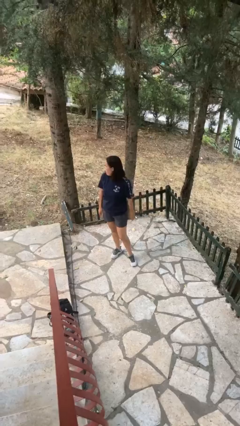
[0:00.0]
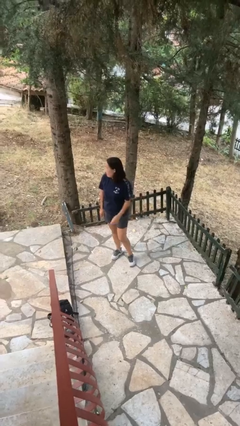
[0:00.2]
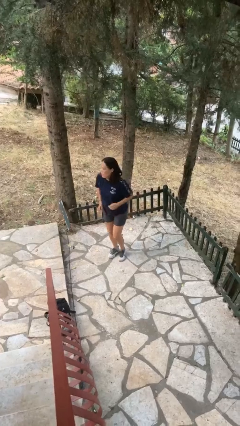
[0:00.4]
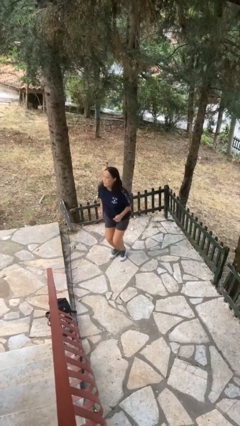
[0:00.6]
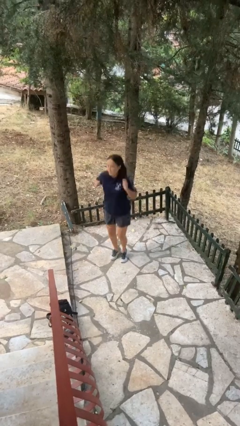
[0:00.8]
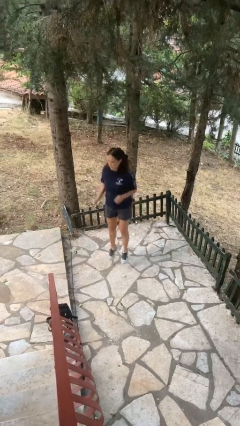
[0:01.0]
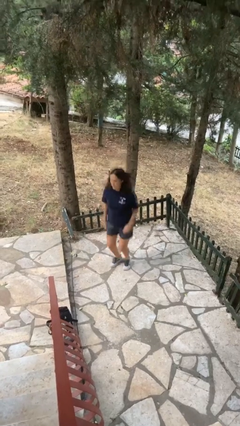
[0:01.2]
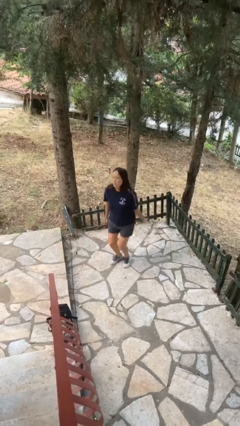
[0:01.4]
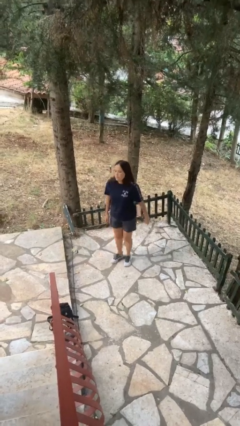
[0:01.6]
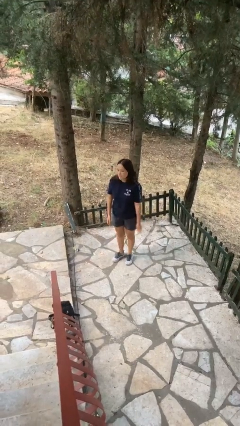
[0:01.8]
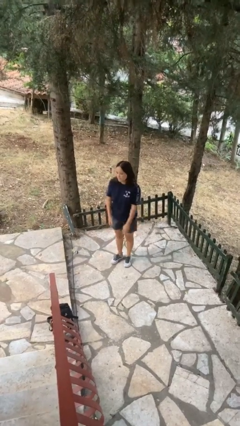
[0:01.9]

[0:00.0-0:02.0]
person jumps

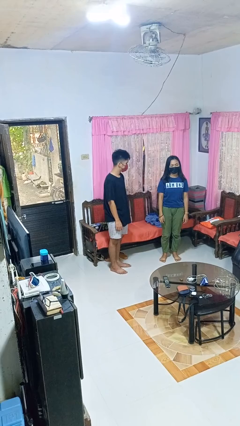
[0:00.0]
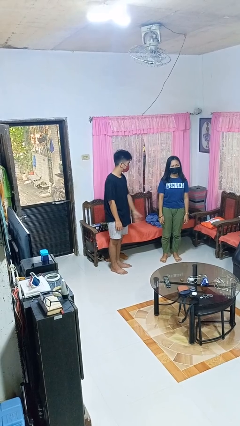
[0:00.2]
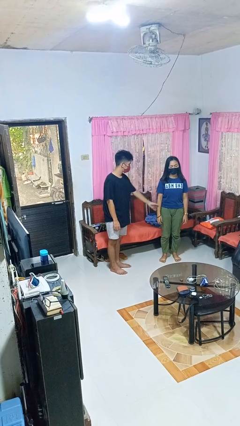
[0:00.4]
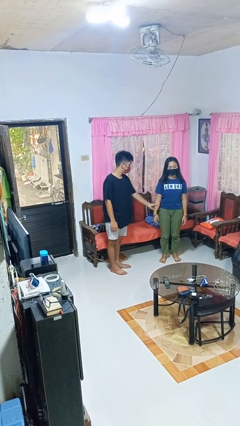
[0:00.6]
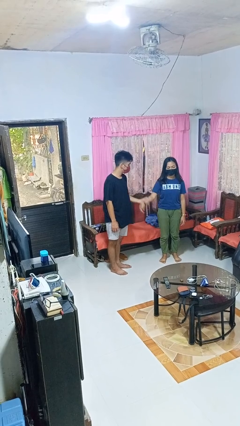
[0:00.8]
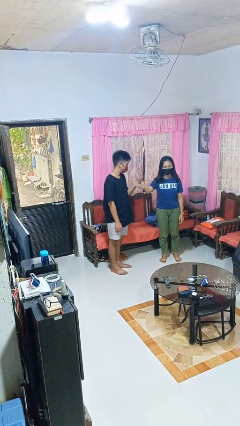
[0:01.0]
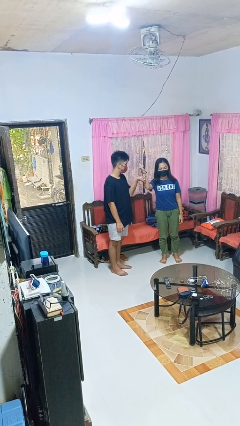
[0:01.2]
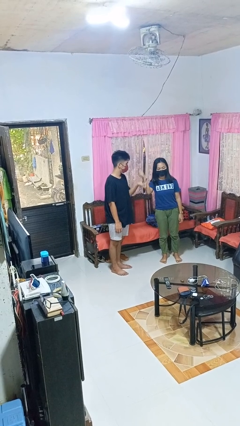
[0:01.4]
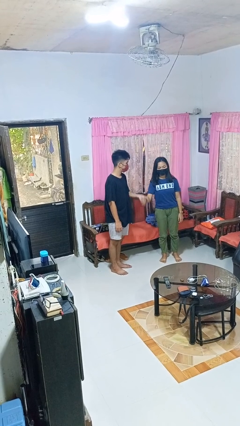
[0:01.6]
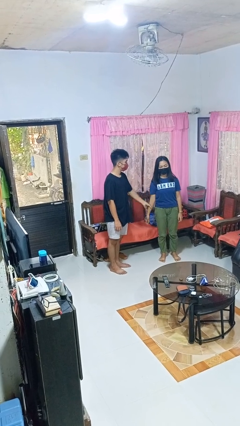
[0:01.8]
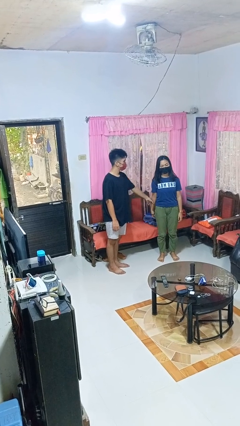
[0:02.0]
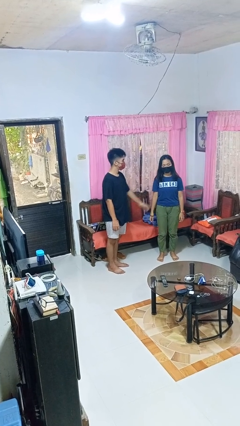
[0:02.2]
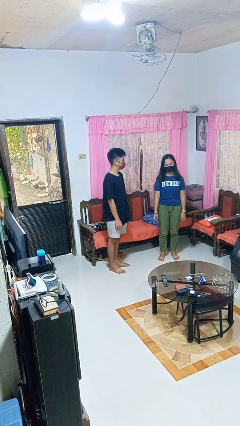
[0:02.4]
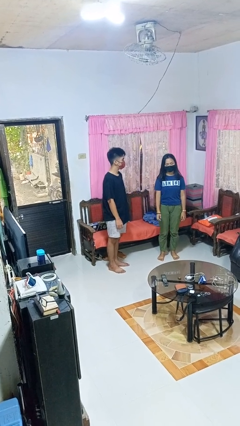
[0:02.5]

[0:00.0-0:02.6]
person grabs person by forearm

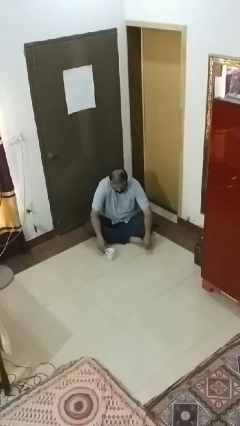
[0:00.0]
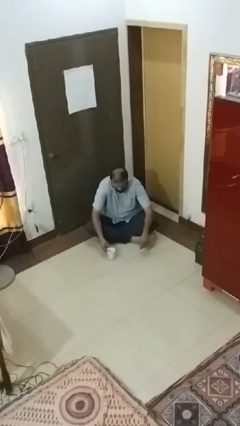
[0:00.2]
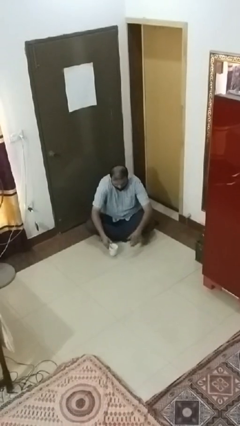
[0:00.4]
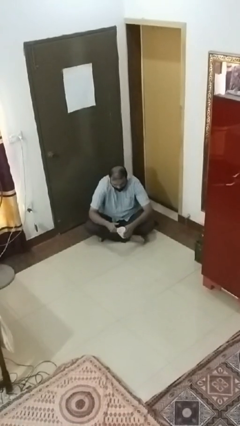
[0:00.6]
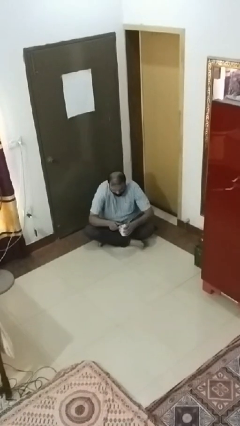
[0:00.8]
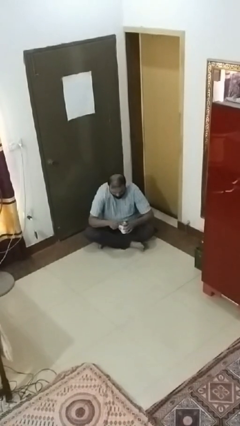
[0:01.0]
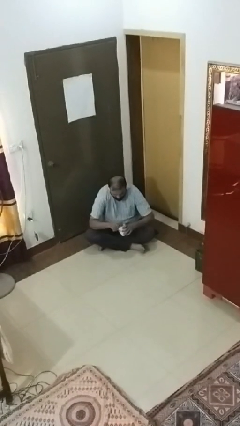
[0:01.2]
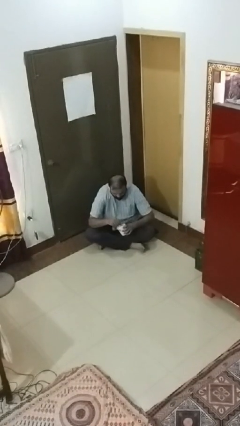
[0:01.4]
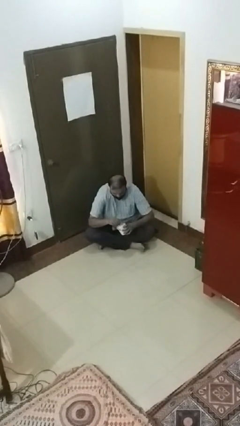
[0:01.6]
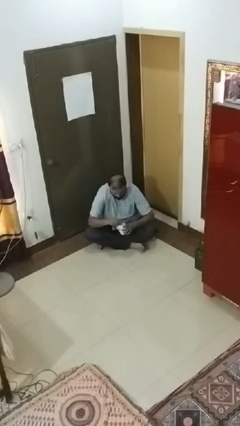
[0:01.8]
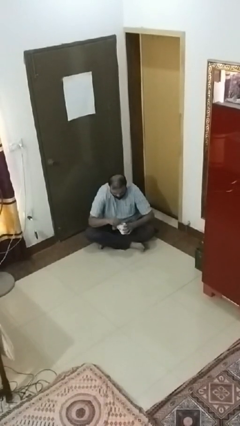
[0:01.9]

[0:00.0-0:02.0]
person stirs mug

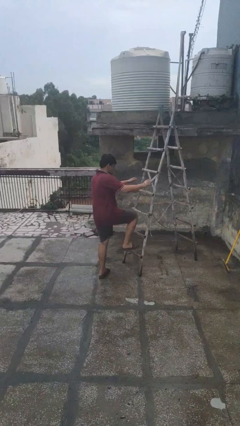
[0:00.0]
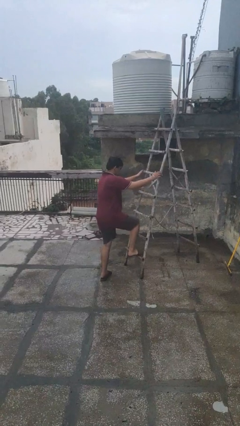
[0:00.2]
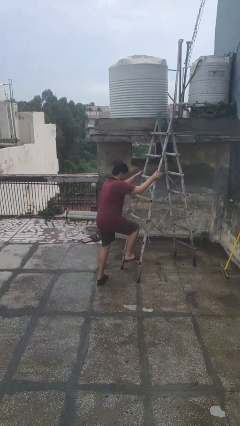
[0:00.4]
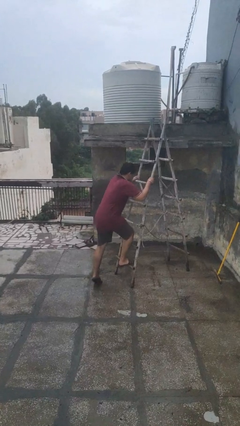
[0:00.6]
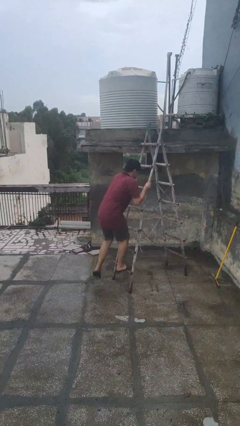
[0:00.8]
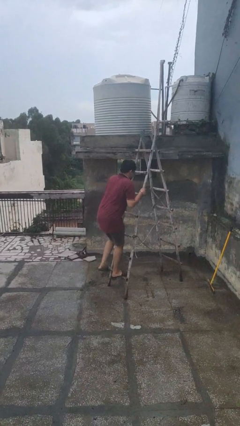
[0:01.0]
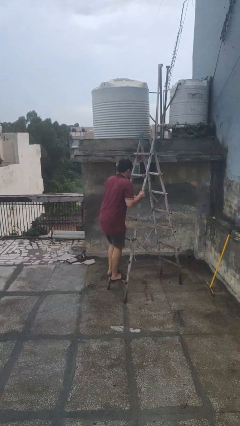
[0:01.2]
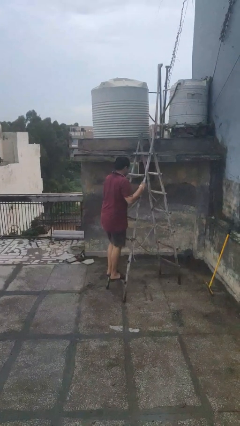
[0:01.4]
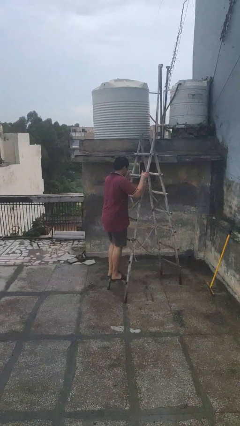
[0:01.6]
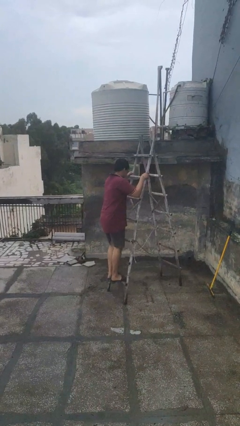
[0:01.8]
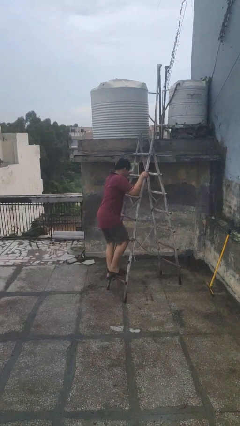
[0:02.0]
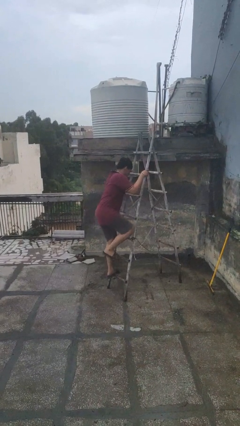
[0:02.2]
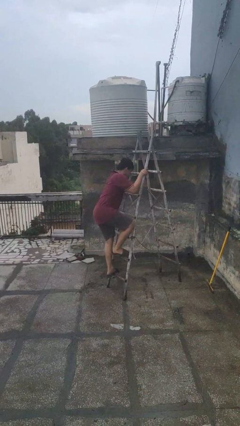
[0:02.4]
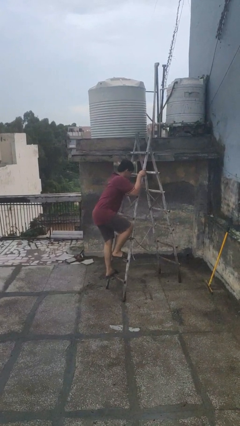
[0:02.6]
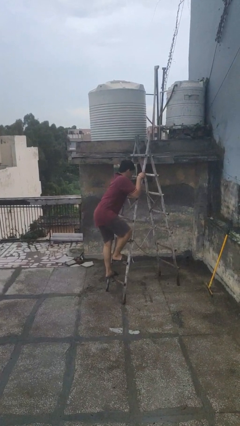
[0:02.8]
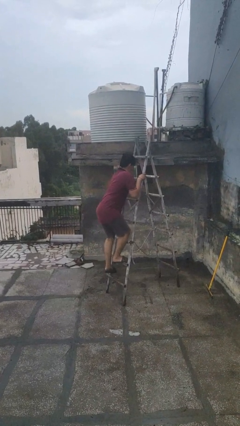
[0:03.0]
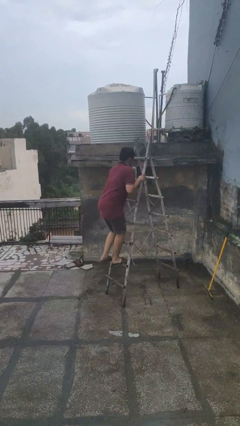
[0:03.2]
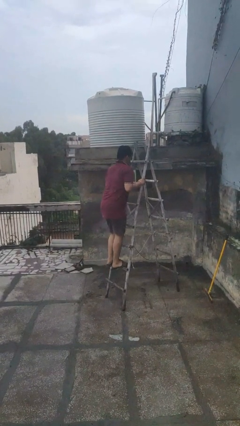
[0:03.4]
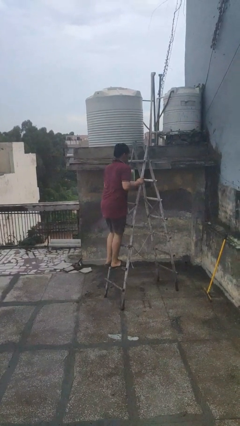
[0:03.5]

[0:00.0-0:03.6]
person climbs up ladder

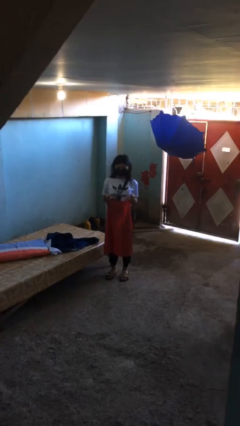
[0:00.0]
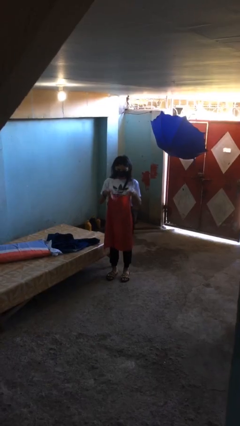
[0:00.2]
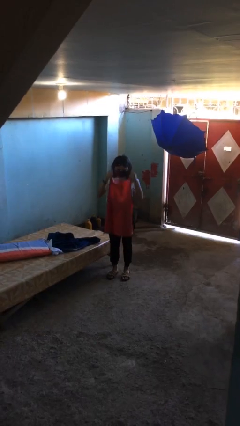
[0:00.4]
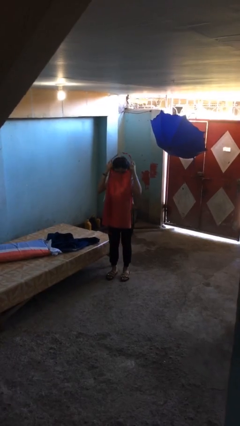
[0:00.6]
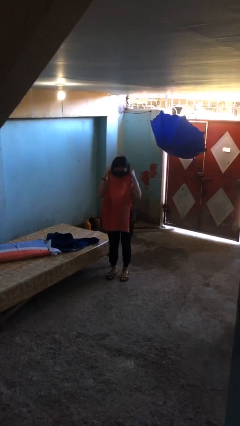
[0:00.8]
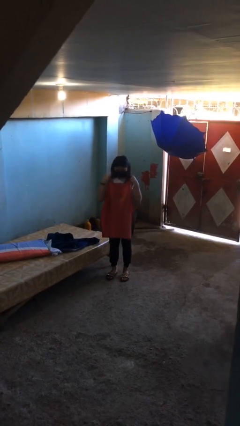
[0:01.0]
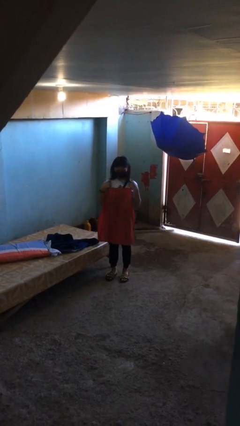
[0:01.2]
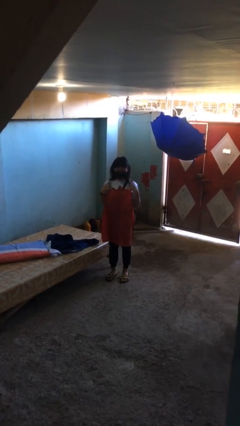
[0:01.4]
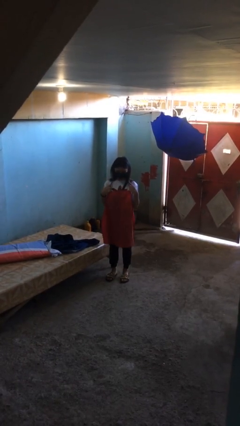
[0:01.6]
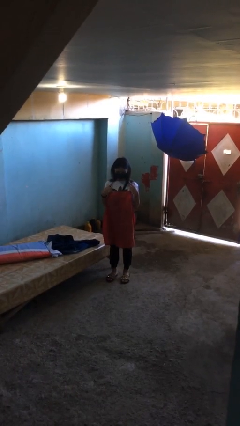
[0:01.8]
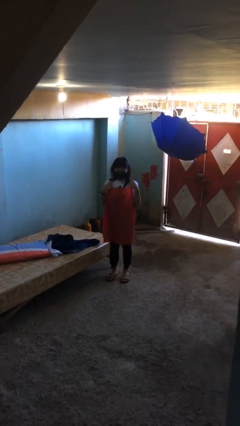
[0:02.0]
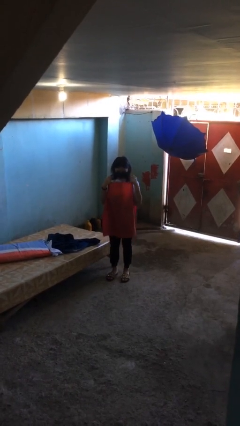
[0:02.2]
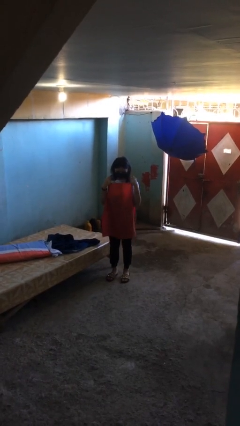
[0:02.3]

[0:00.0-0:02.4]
person puts on apron

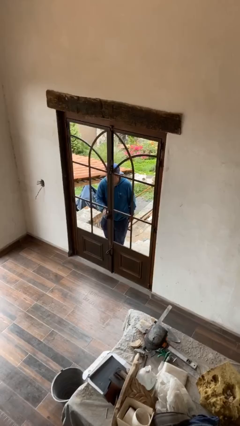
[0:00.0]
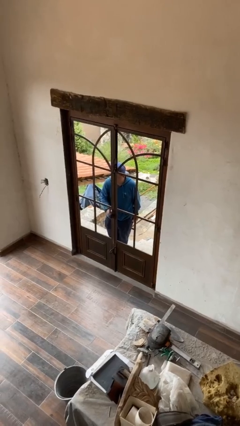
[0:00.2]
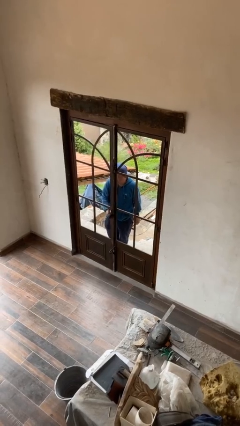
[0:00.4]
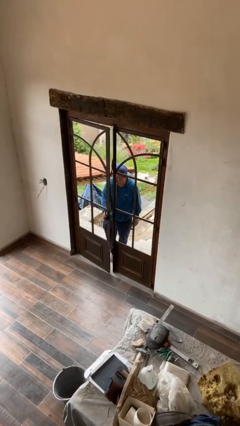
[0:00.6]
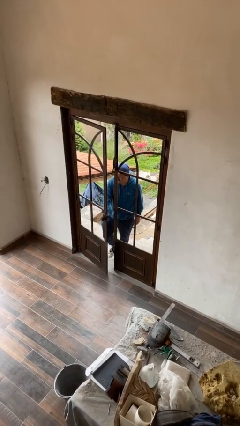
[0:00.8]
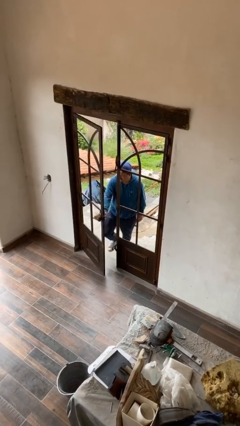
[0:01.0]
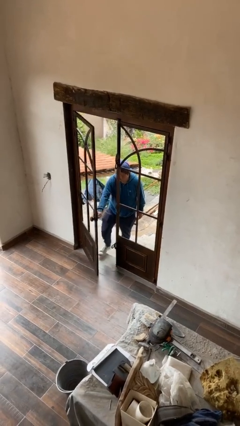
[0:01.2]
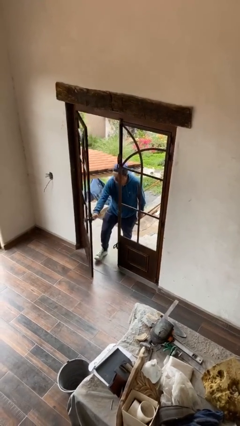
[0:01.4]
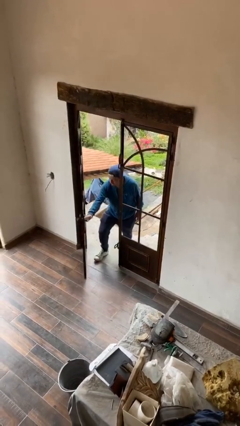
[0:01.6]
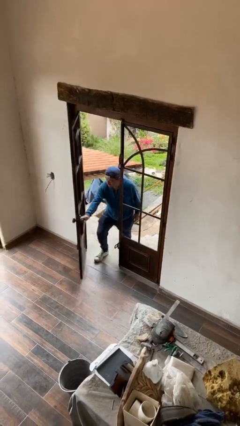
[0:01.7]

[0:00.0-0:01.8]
person opens facility door

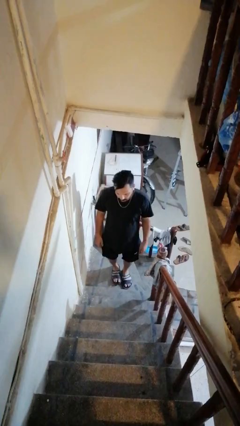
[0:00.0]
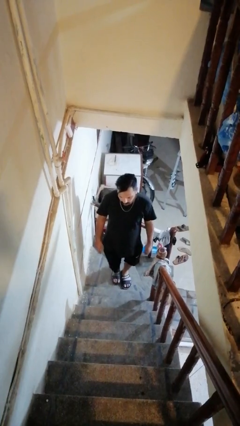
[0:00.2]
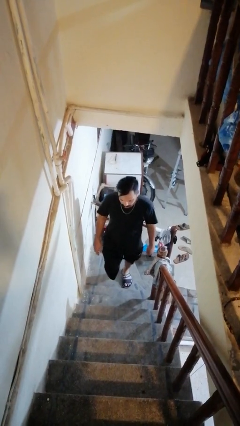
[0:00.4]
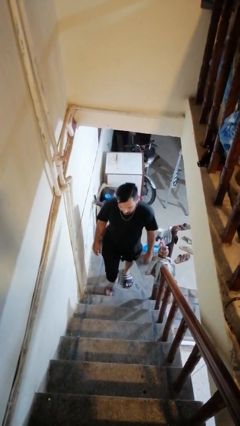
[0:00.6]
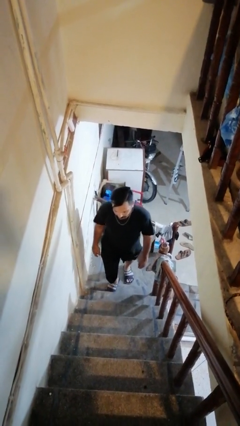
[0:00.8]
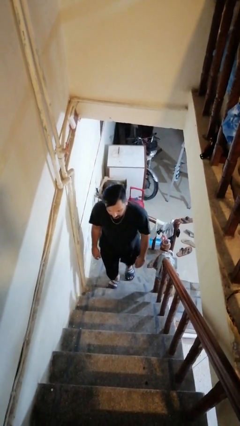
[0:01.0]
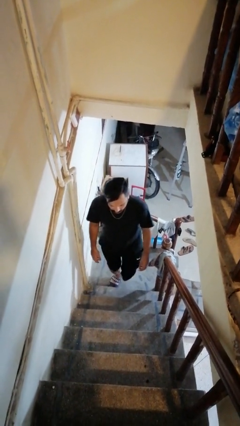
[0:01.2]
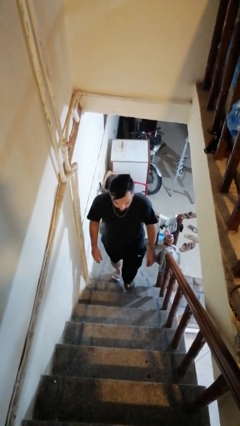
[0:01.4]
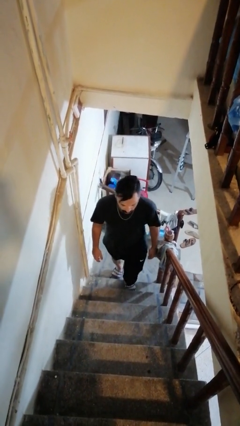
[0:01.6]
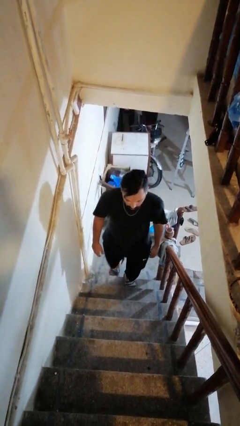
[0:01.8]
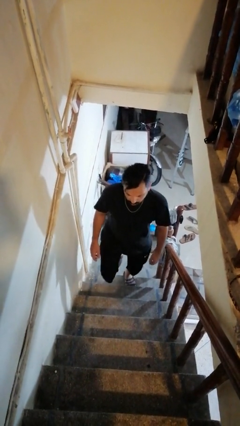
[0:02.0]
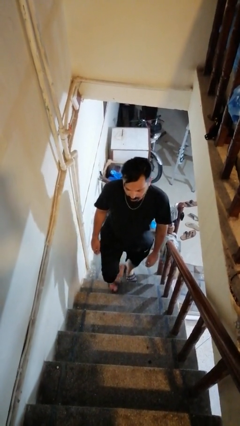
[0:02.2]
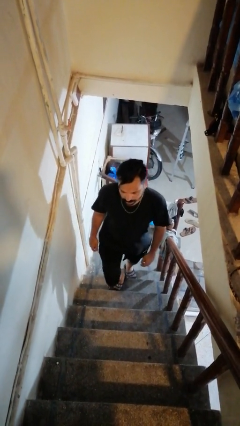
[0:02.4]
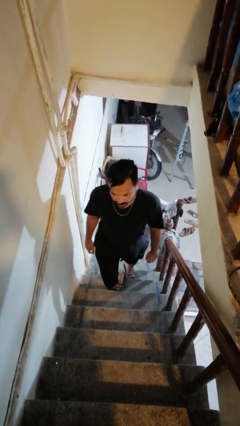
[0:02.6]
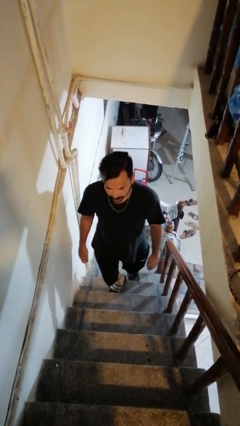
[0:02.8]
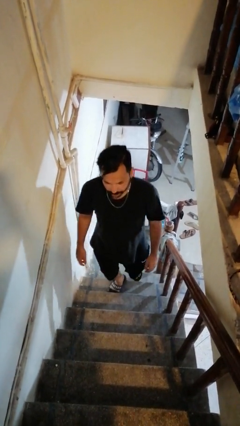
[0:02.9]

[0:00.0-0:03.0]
person climbs up stairs
